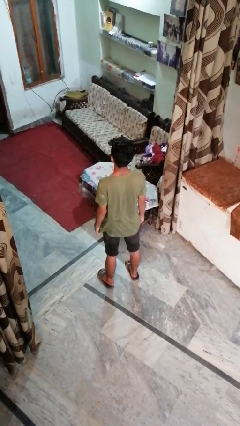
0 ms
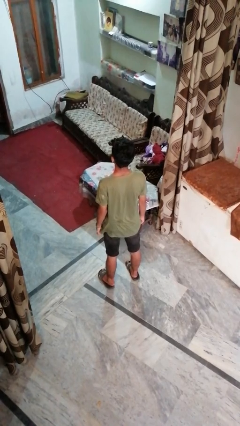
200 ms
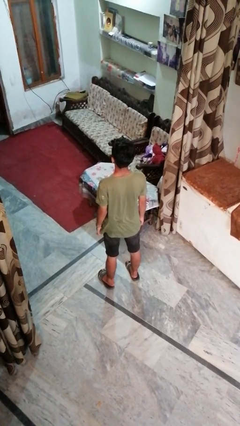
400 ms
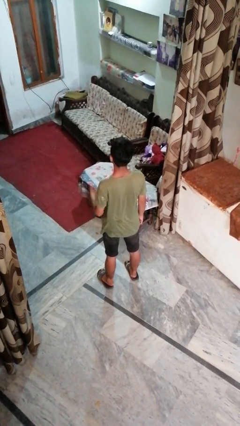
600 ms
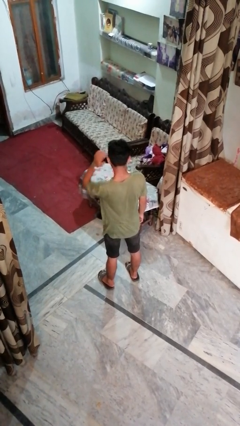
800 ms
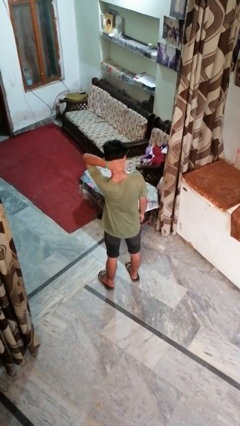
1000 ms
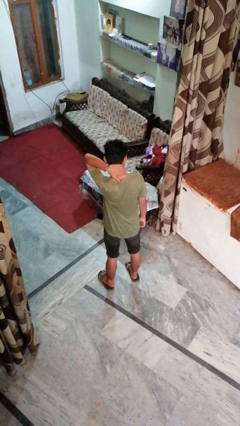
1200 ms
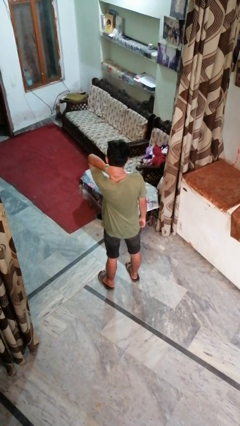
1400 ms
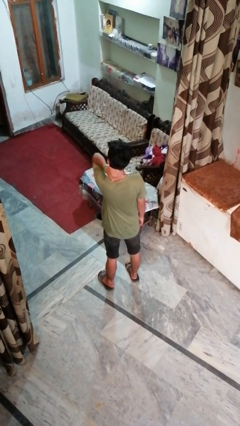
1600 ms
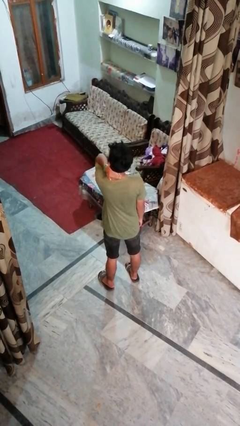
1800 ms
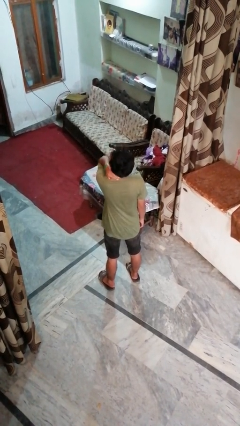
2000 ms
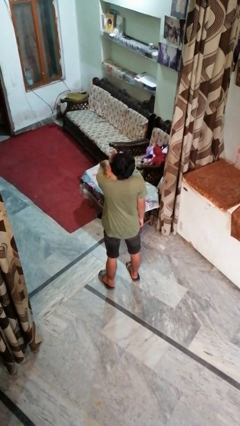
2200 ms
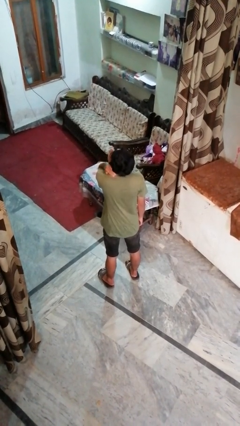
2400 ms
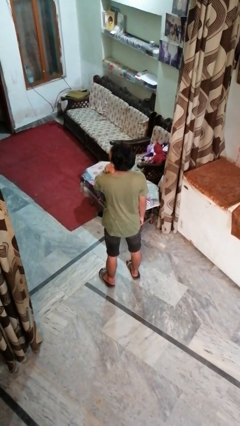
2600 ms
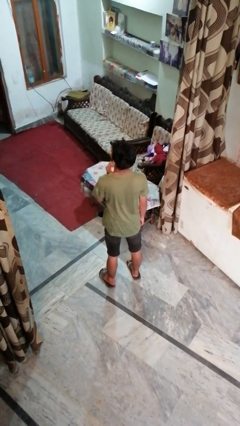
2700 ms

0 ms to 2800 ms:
person rubs neck

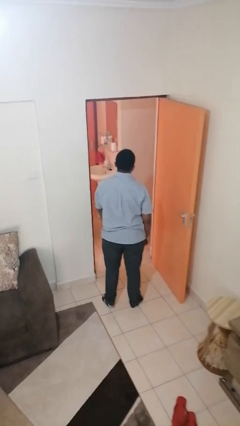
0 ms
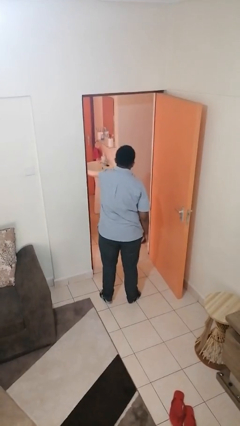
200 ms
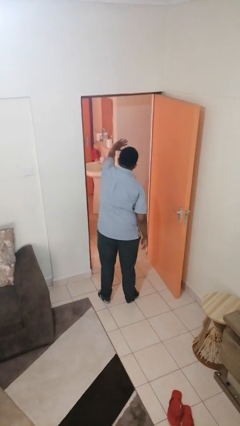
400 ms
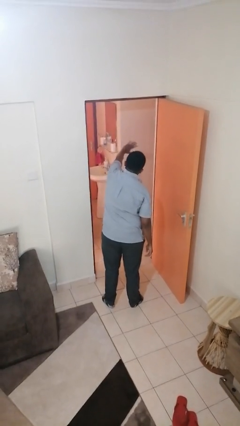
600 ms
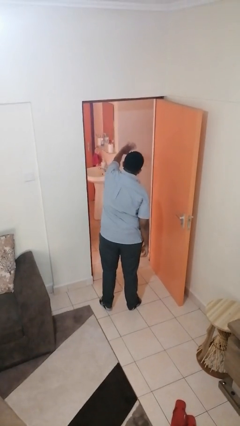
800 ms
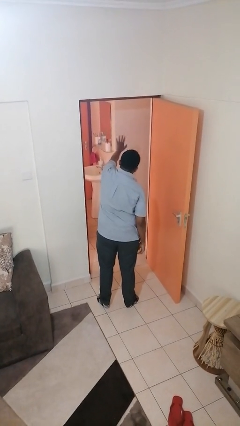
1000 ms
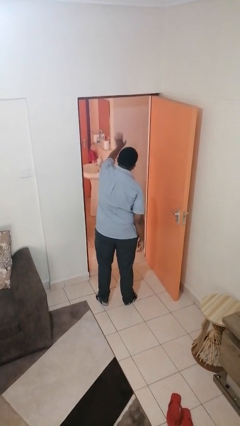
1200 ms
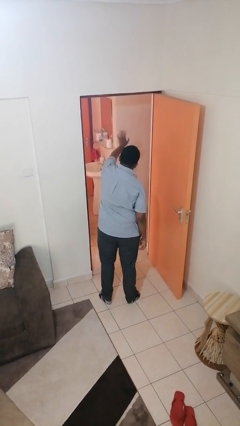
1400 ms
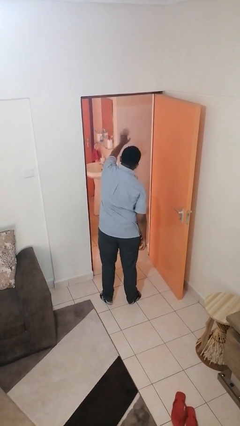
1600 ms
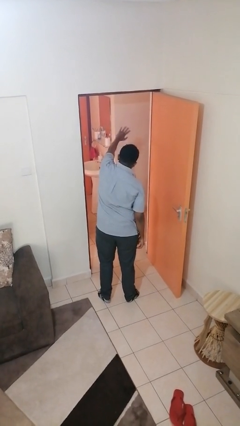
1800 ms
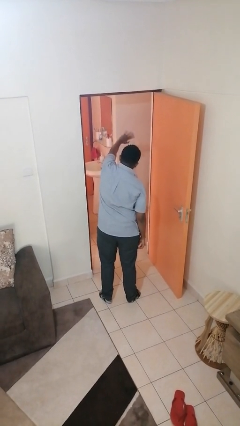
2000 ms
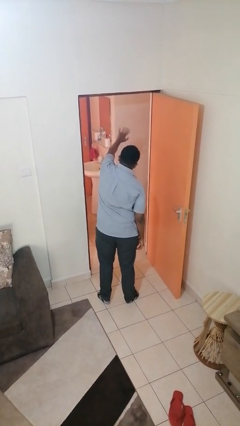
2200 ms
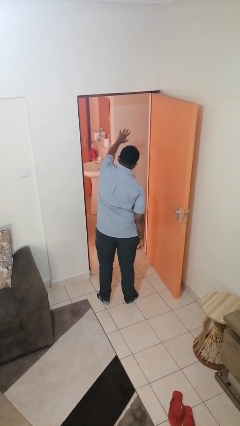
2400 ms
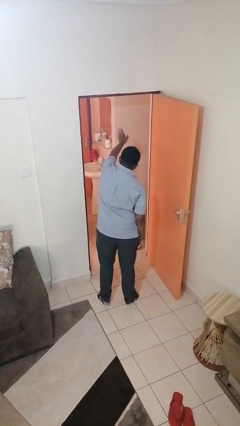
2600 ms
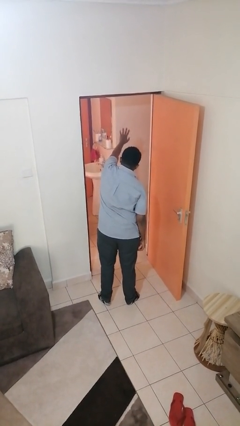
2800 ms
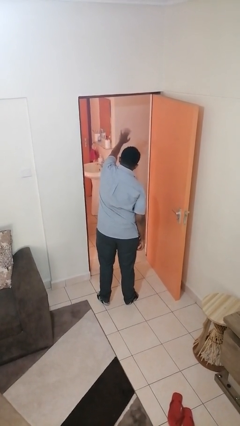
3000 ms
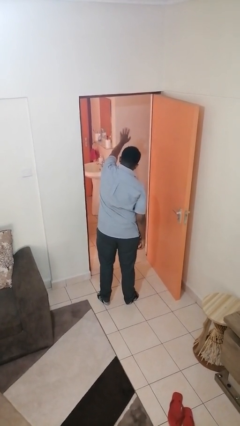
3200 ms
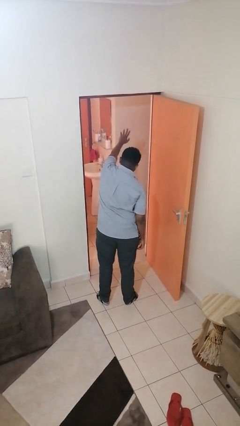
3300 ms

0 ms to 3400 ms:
person waves at person

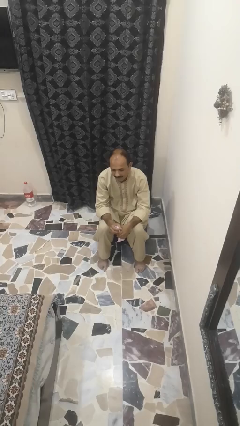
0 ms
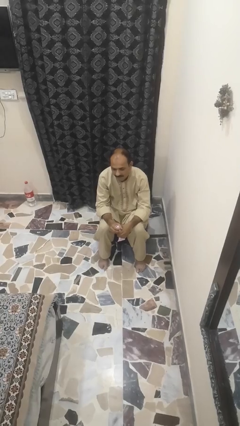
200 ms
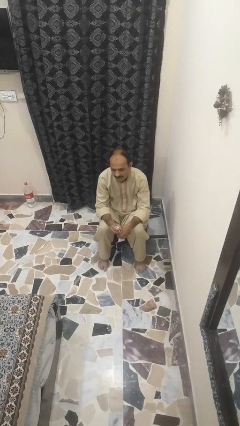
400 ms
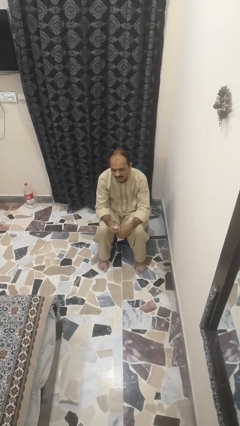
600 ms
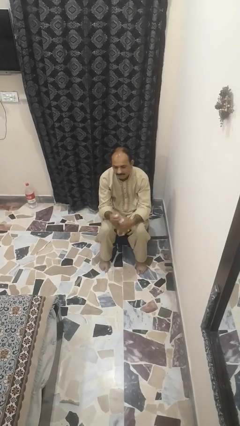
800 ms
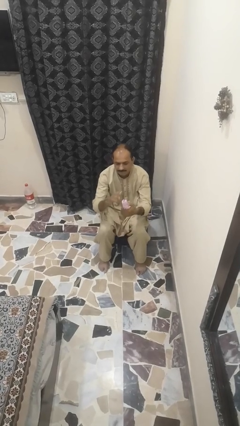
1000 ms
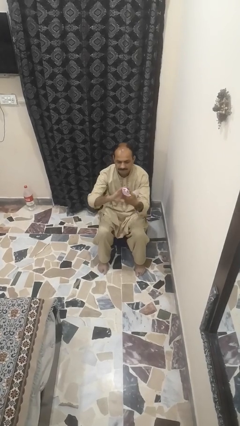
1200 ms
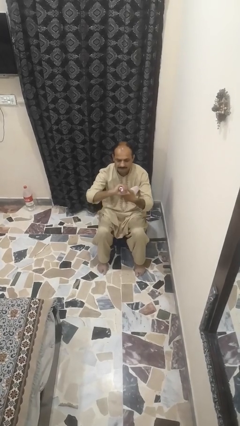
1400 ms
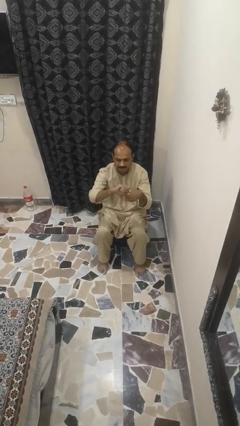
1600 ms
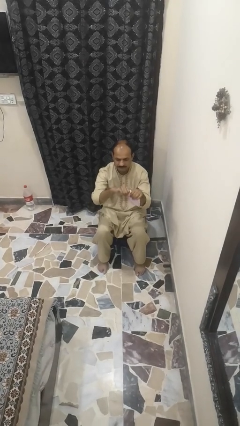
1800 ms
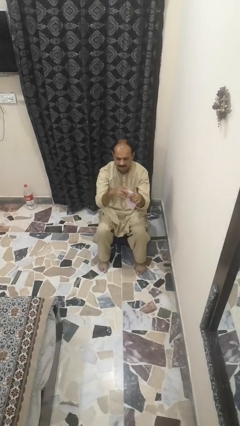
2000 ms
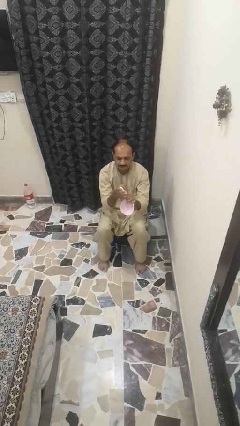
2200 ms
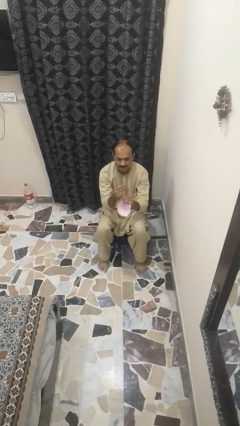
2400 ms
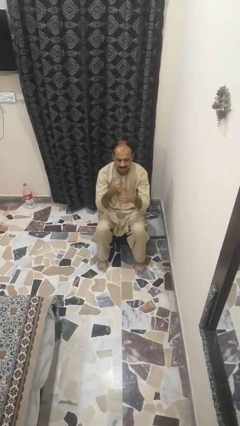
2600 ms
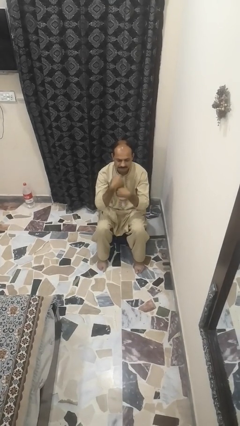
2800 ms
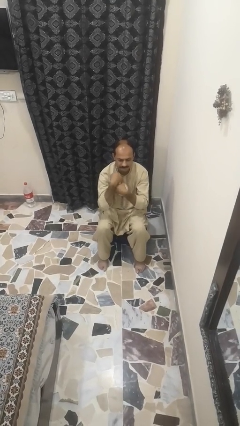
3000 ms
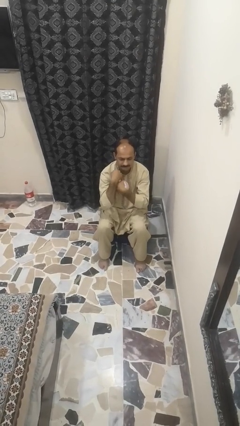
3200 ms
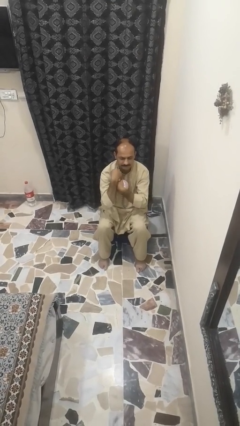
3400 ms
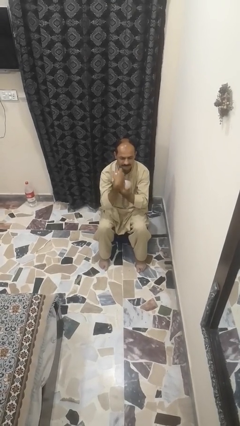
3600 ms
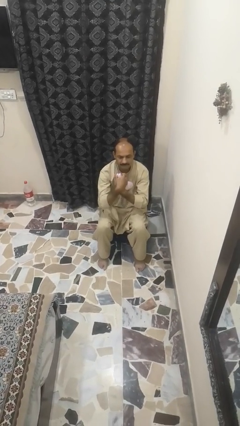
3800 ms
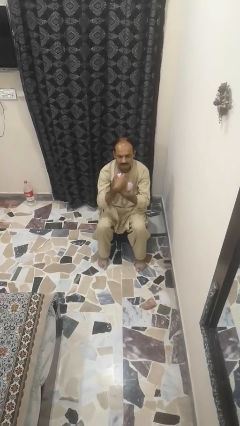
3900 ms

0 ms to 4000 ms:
person squeezes object

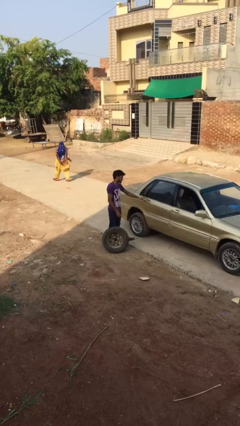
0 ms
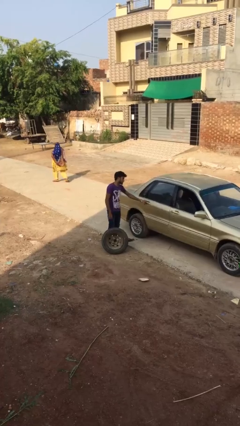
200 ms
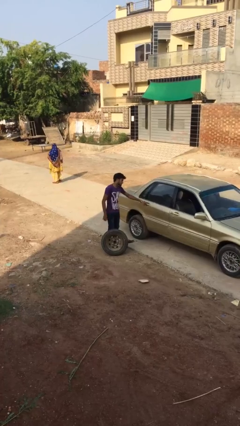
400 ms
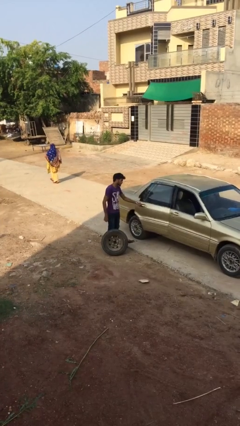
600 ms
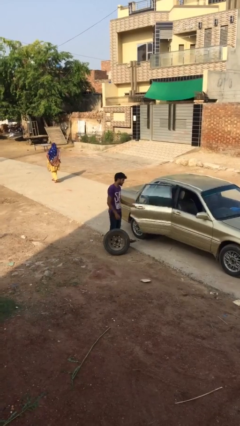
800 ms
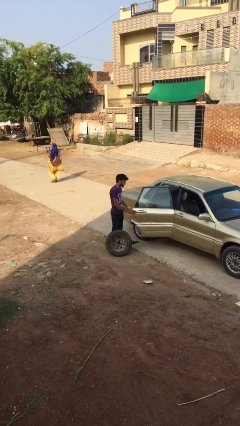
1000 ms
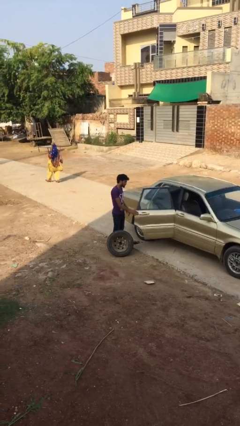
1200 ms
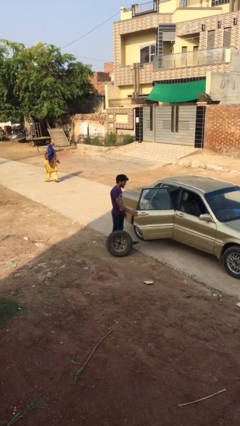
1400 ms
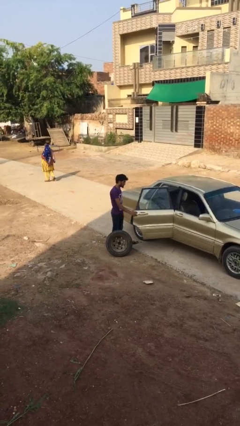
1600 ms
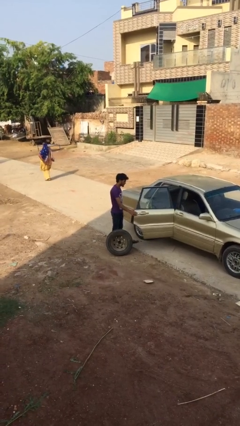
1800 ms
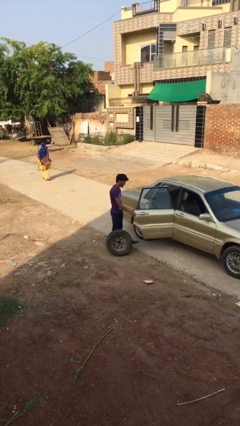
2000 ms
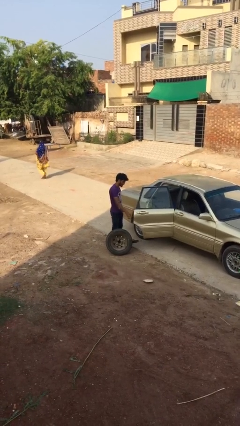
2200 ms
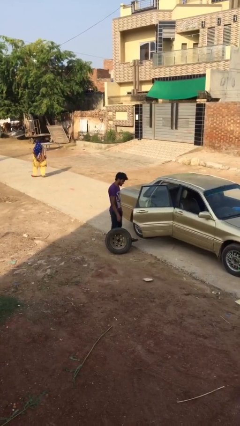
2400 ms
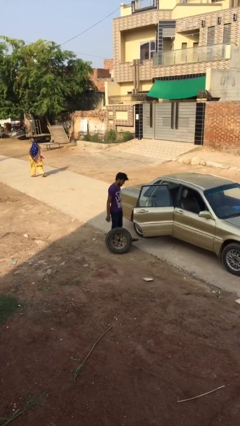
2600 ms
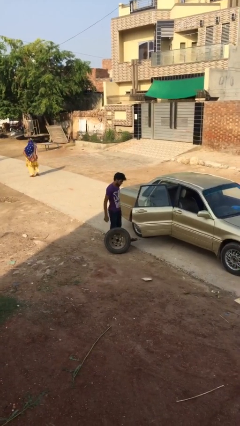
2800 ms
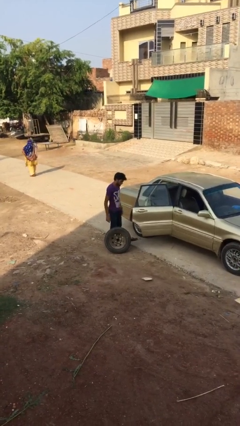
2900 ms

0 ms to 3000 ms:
person opens car door

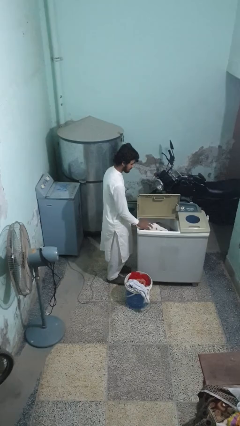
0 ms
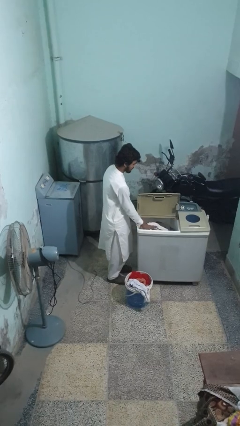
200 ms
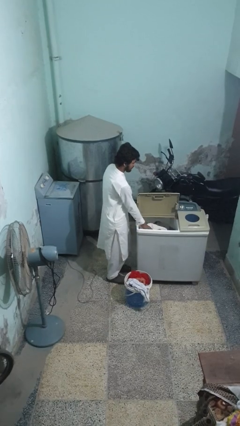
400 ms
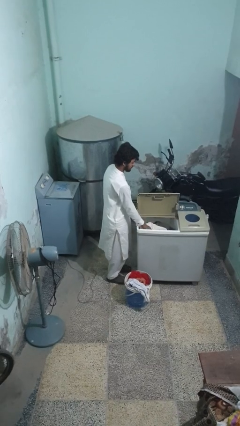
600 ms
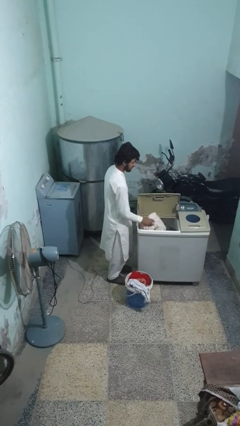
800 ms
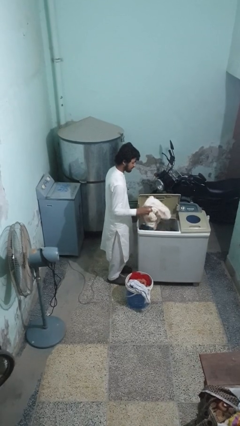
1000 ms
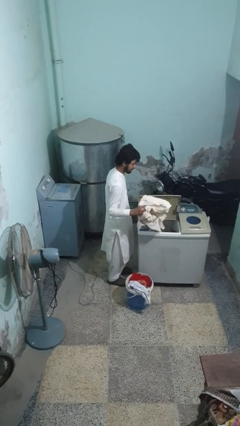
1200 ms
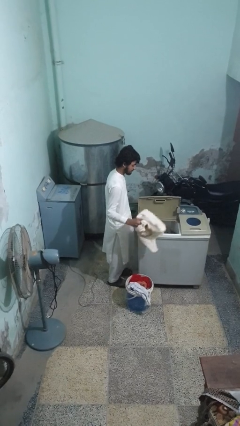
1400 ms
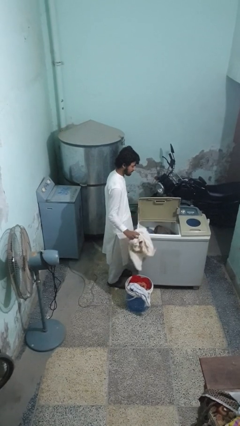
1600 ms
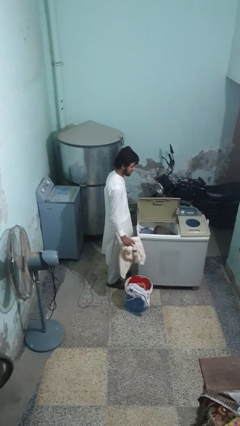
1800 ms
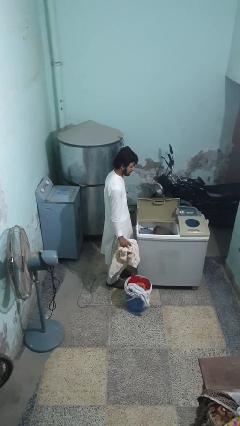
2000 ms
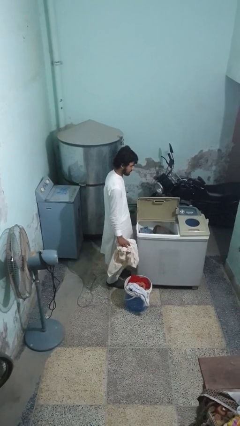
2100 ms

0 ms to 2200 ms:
person unloads clotheswasher

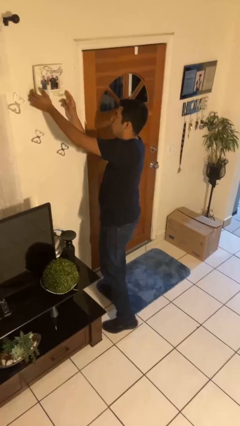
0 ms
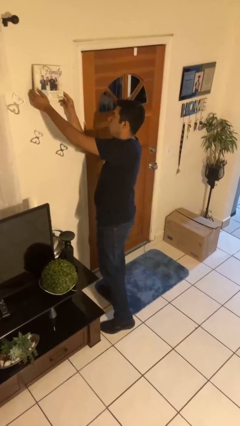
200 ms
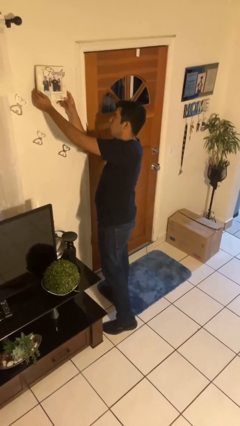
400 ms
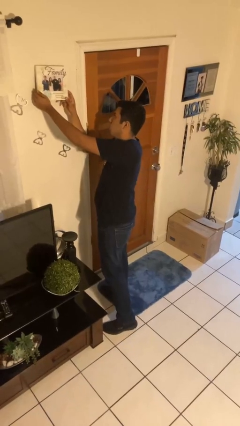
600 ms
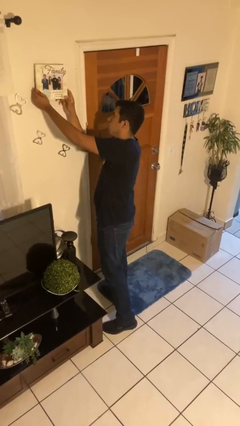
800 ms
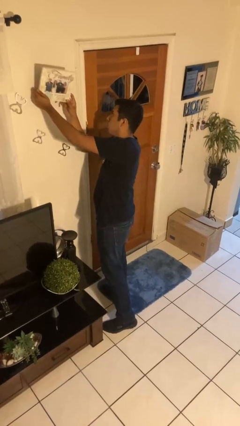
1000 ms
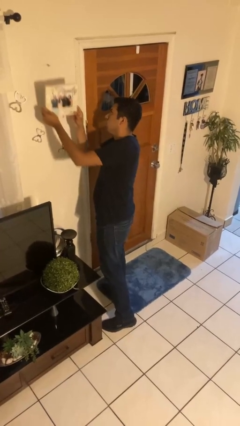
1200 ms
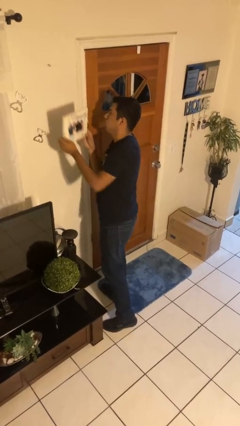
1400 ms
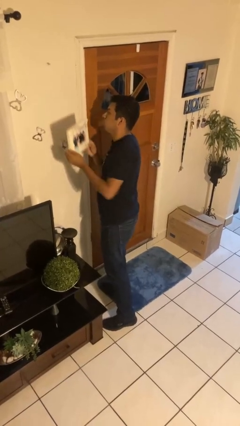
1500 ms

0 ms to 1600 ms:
person takes down picture frame
